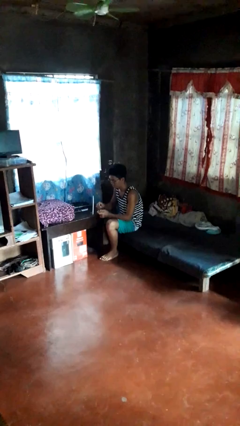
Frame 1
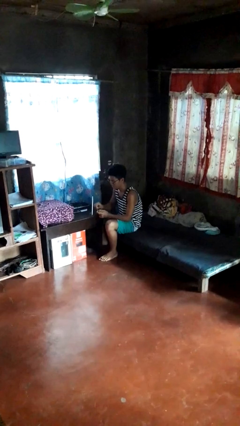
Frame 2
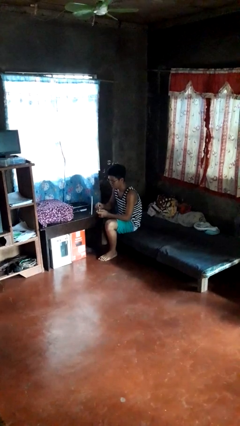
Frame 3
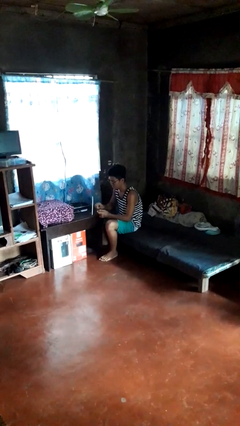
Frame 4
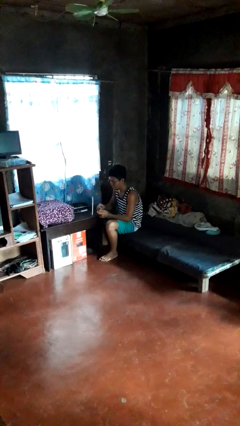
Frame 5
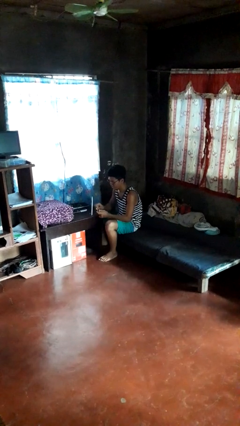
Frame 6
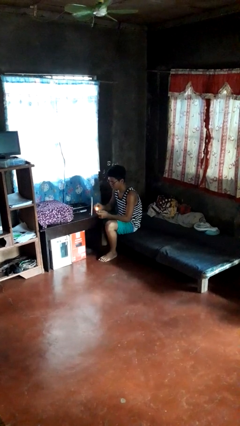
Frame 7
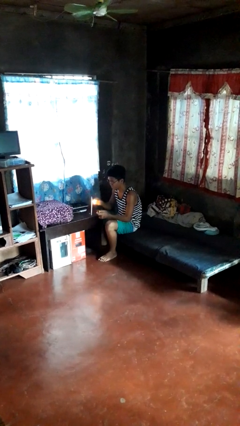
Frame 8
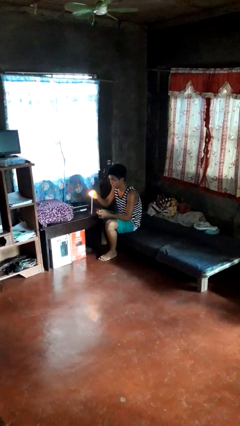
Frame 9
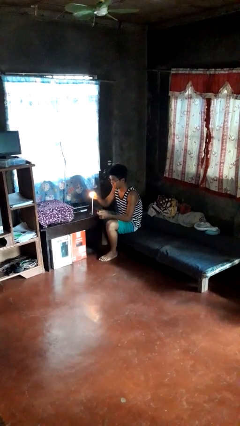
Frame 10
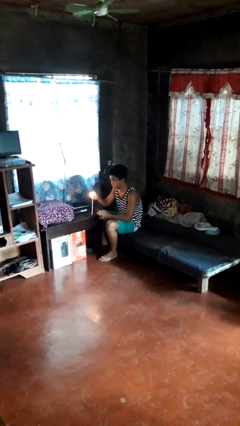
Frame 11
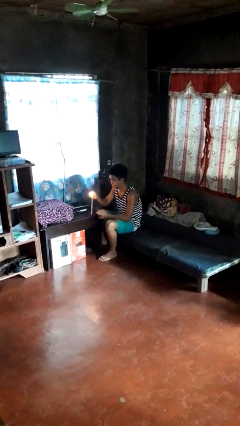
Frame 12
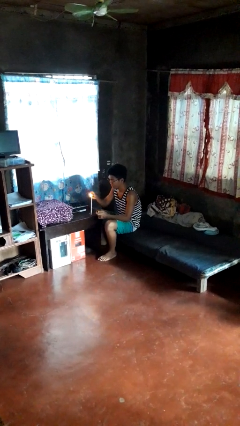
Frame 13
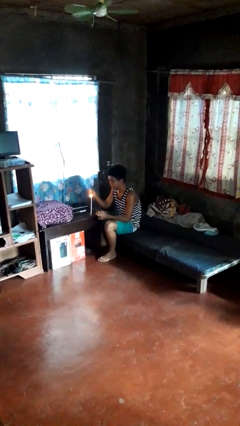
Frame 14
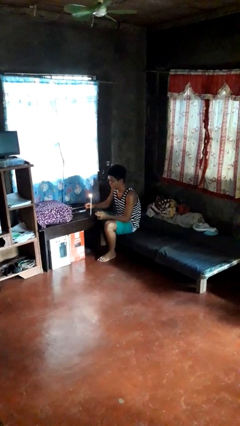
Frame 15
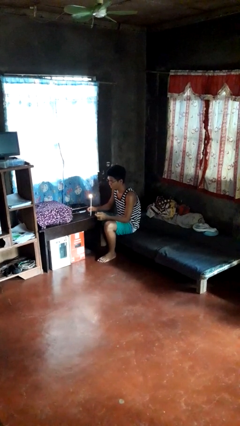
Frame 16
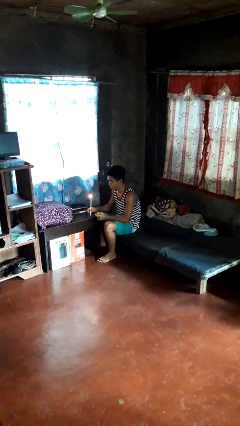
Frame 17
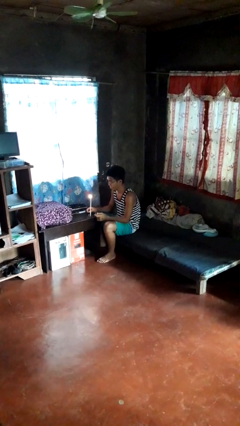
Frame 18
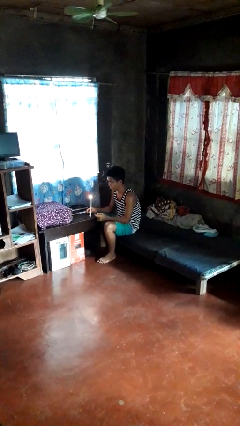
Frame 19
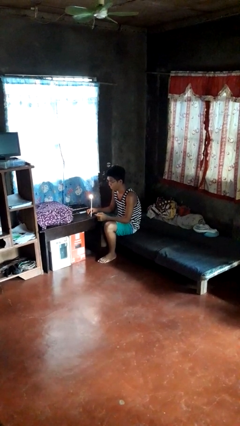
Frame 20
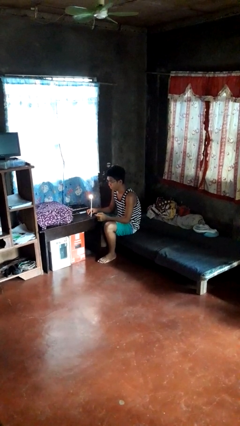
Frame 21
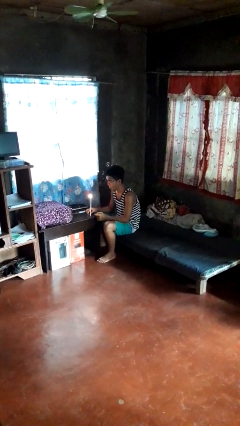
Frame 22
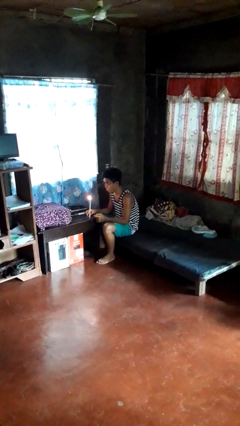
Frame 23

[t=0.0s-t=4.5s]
person lights candle

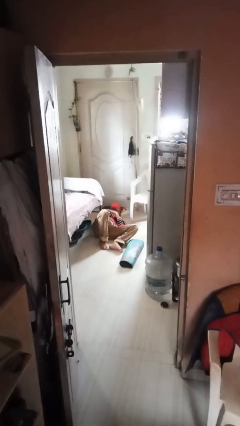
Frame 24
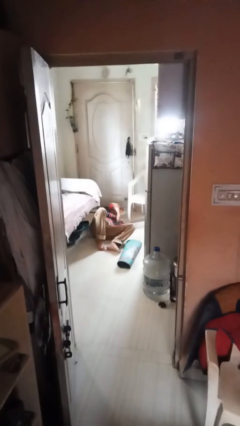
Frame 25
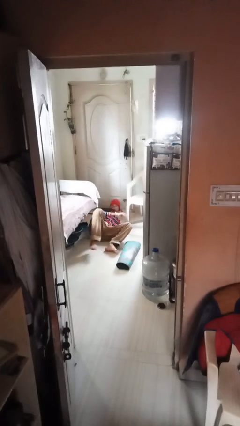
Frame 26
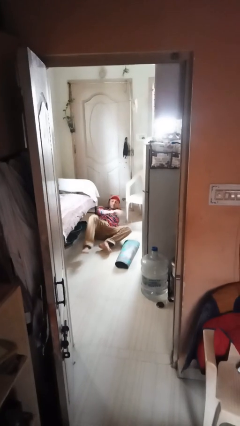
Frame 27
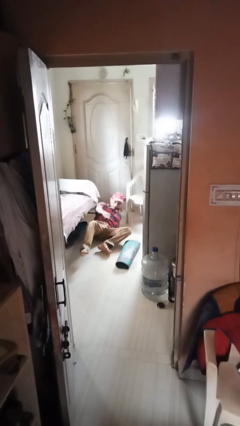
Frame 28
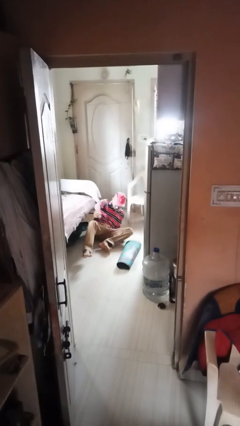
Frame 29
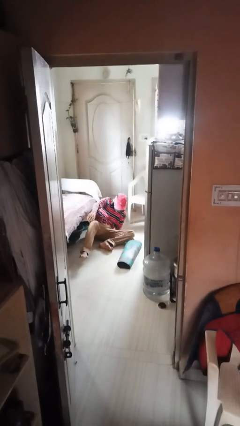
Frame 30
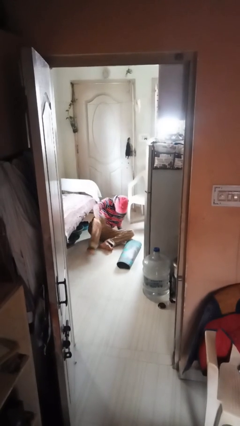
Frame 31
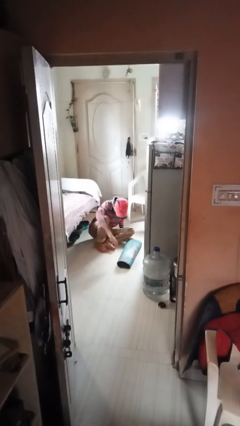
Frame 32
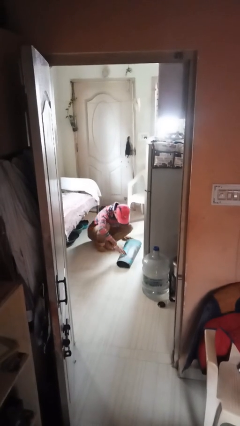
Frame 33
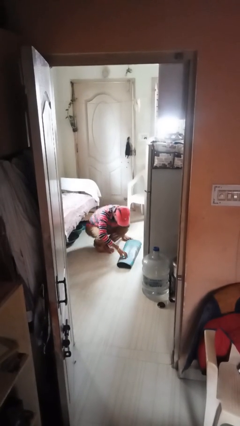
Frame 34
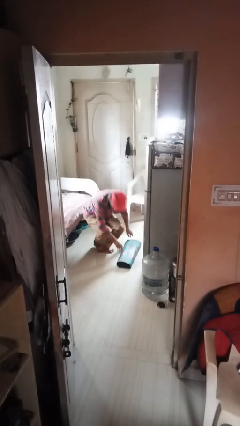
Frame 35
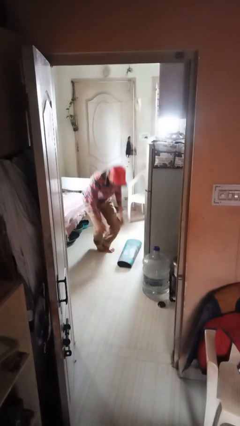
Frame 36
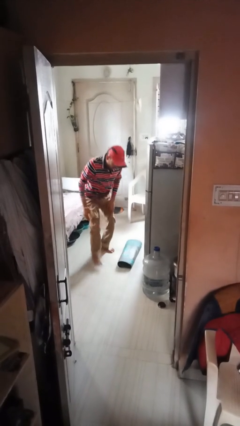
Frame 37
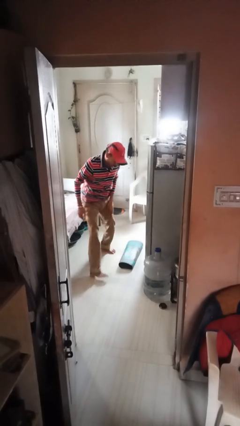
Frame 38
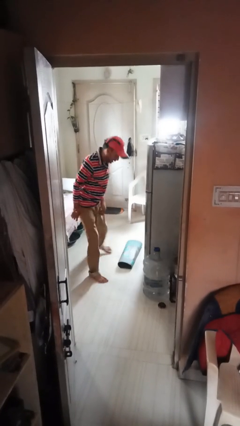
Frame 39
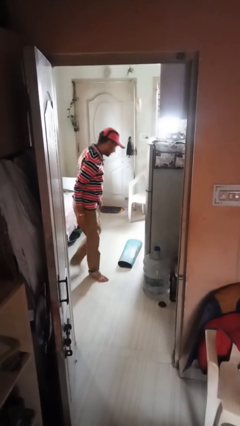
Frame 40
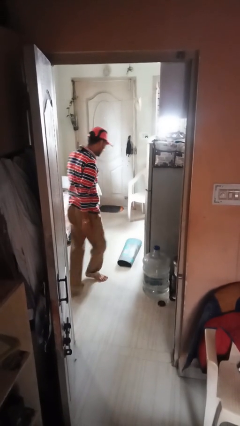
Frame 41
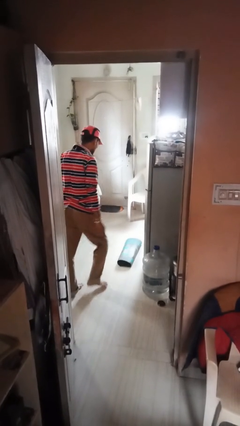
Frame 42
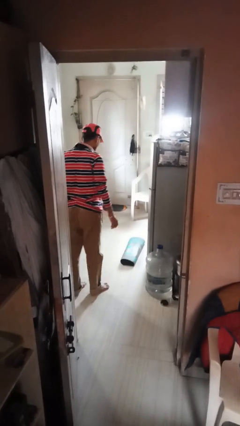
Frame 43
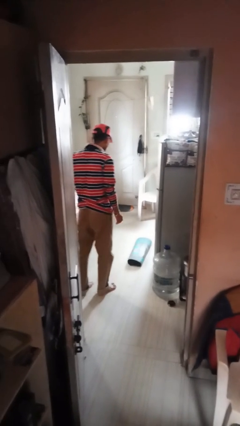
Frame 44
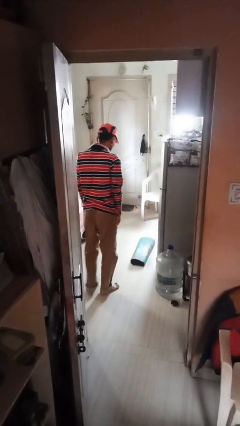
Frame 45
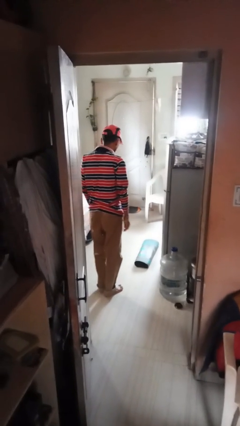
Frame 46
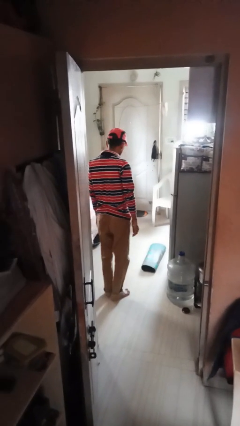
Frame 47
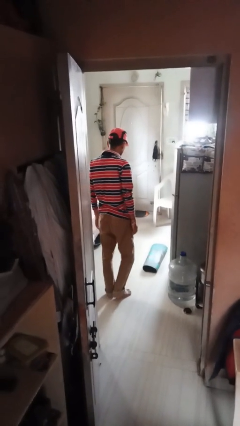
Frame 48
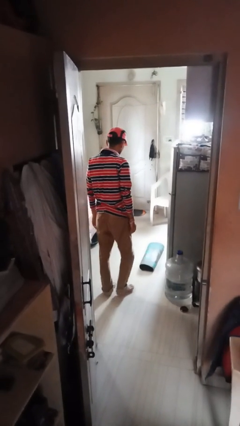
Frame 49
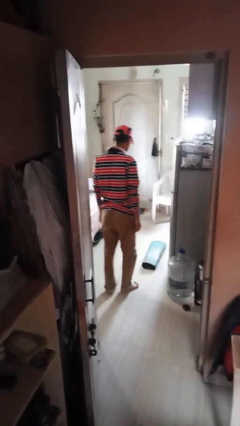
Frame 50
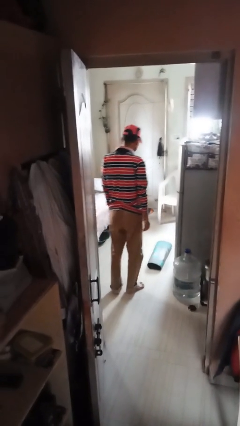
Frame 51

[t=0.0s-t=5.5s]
person stands up from floor

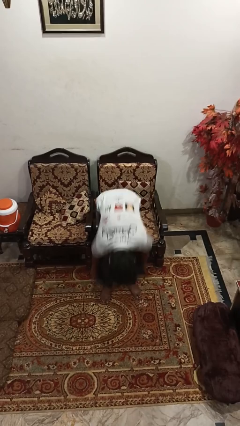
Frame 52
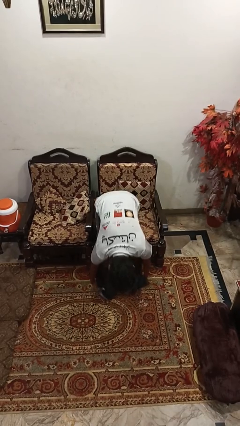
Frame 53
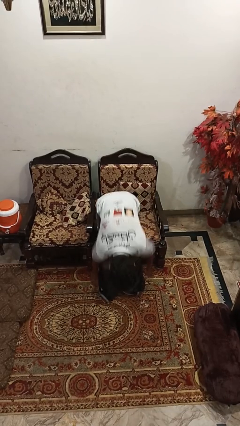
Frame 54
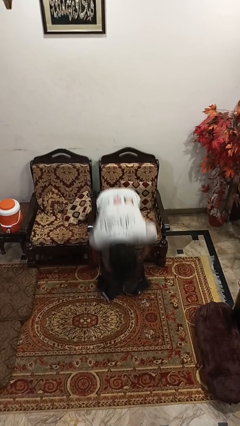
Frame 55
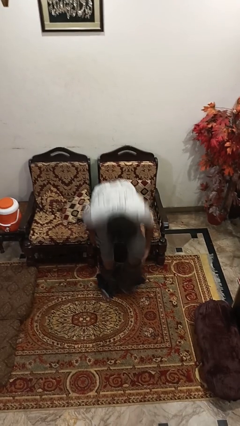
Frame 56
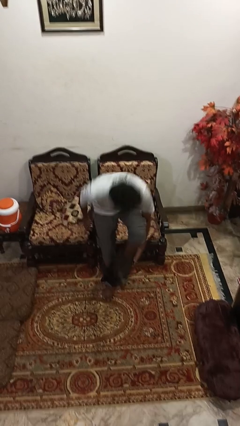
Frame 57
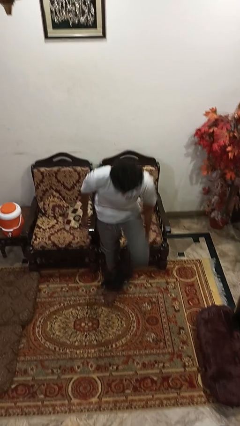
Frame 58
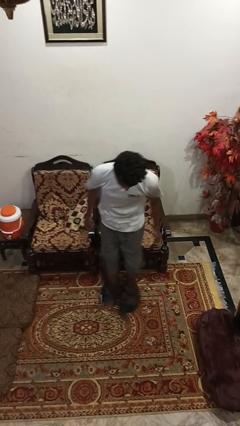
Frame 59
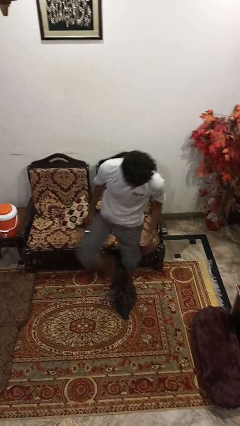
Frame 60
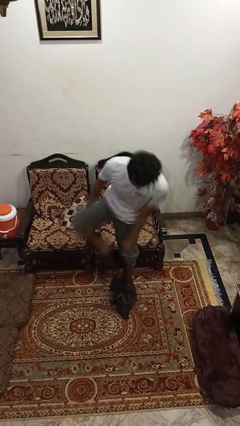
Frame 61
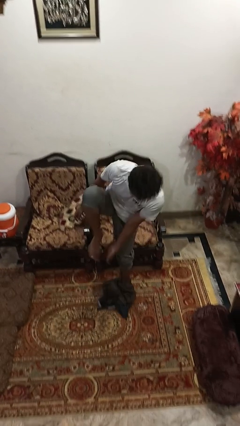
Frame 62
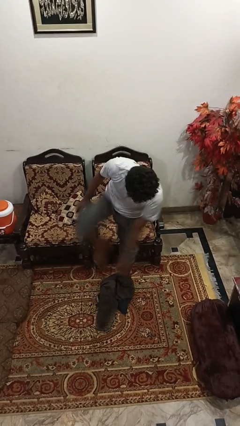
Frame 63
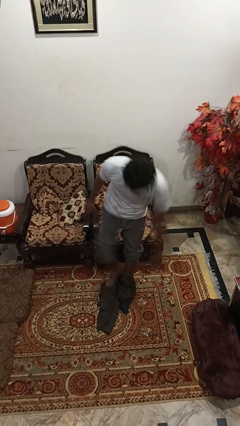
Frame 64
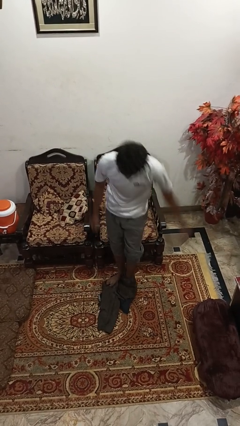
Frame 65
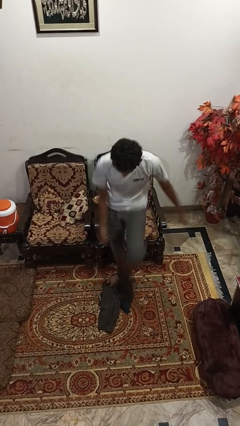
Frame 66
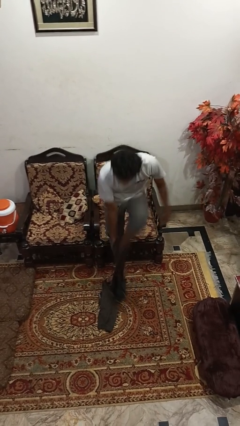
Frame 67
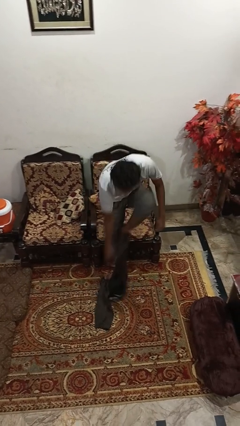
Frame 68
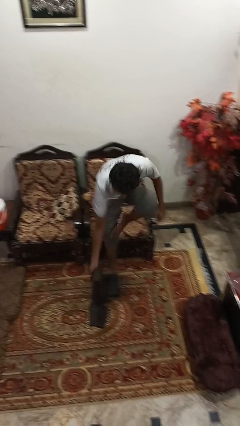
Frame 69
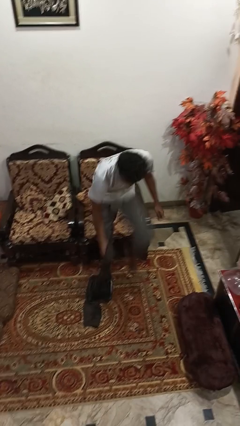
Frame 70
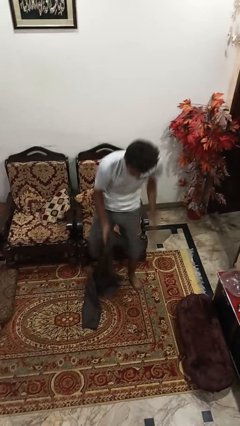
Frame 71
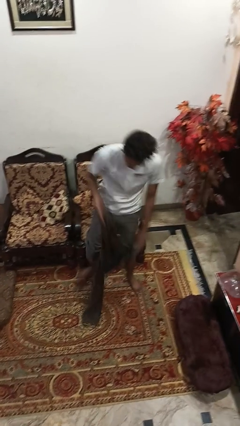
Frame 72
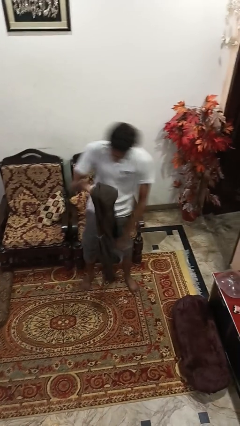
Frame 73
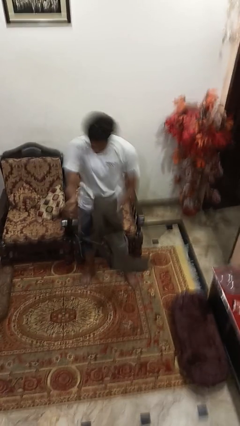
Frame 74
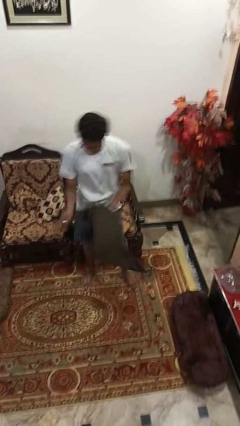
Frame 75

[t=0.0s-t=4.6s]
person takes off pants

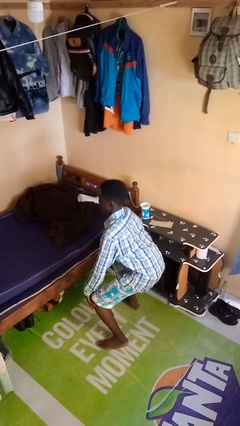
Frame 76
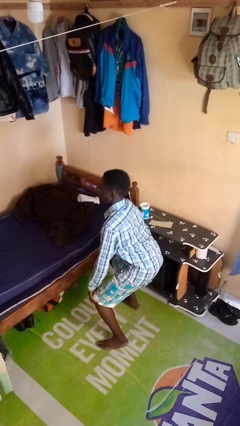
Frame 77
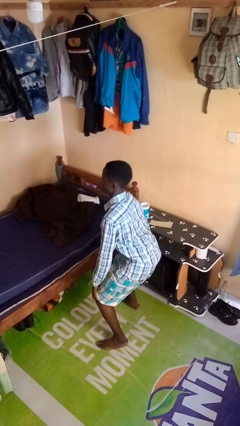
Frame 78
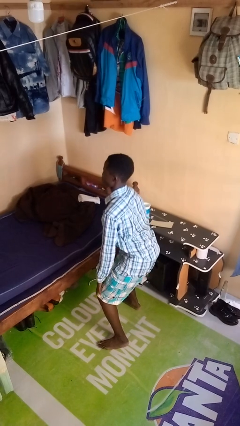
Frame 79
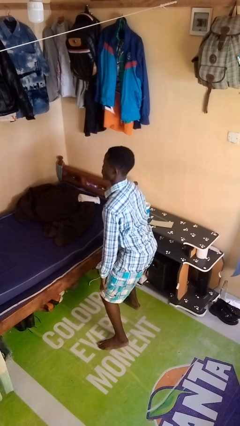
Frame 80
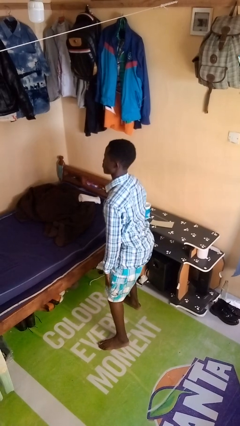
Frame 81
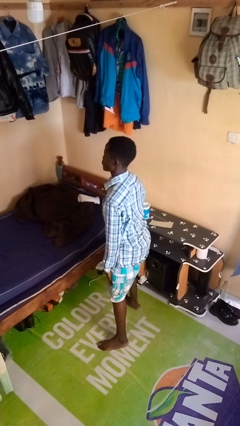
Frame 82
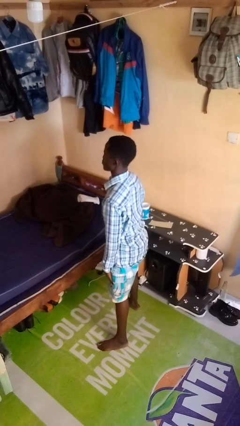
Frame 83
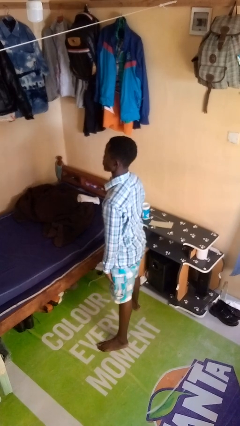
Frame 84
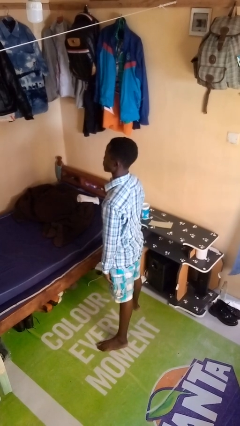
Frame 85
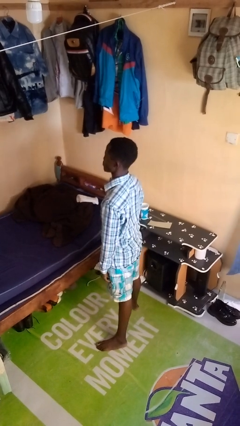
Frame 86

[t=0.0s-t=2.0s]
person stands up

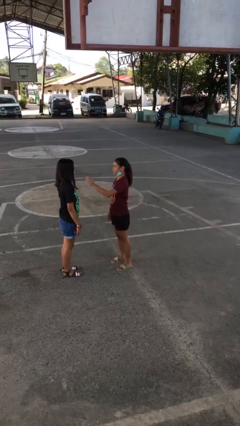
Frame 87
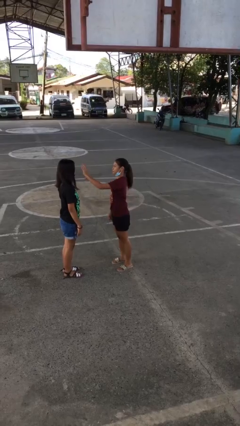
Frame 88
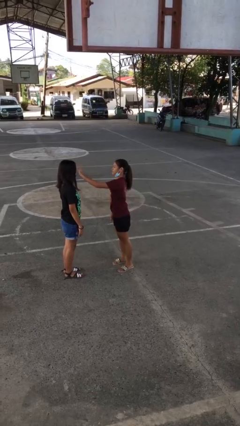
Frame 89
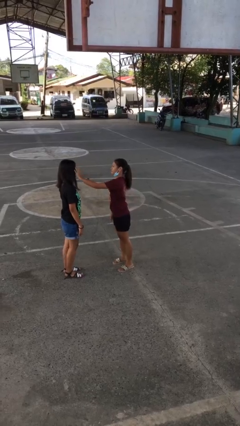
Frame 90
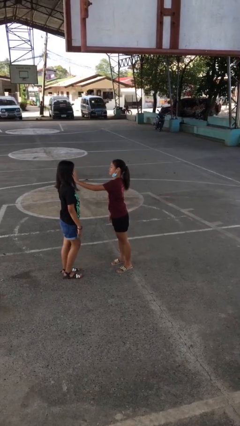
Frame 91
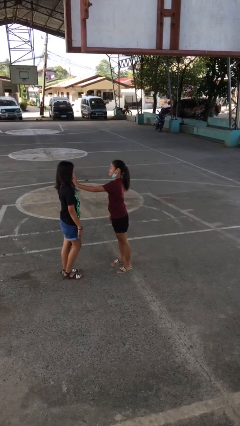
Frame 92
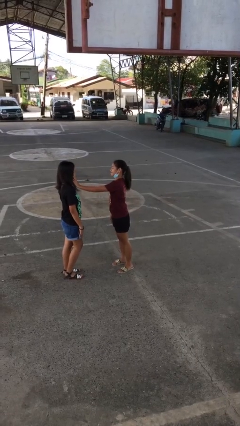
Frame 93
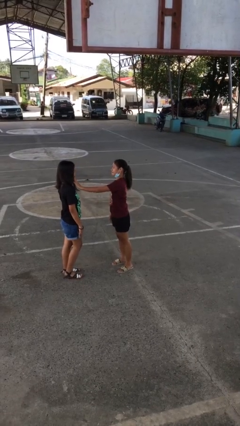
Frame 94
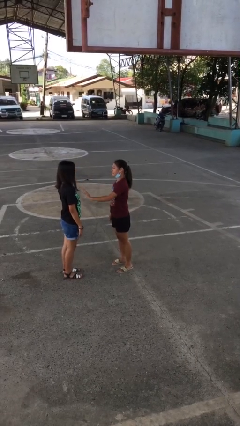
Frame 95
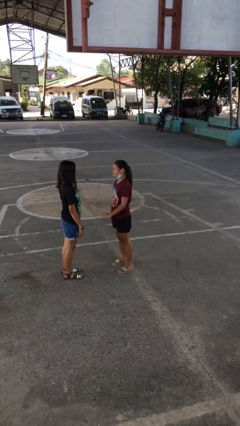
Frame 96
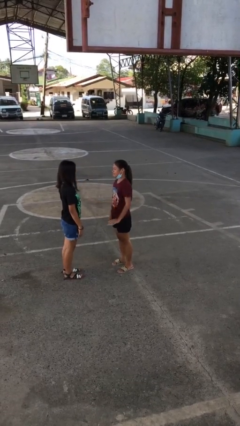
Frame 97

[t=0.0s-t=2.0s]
person touches face of person
